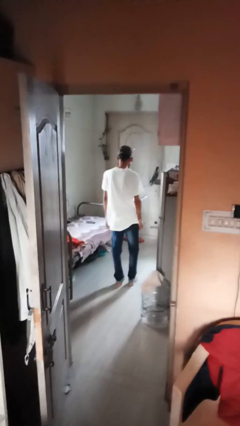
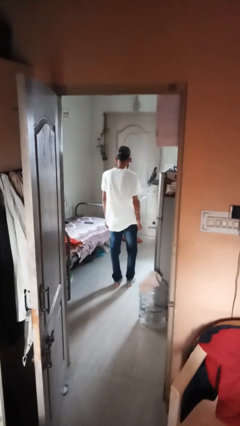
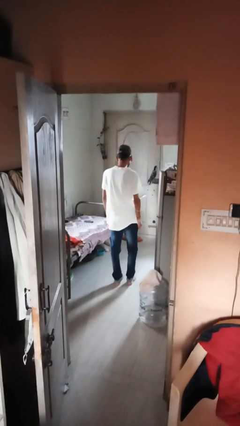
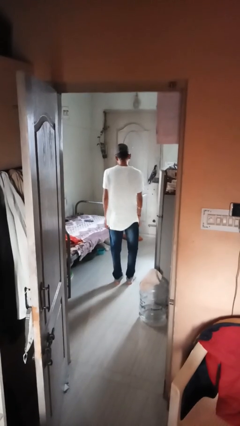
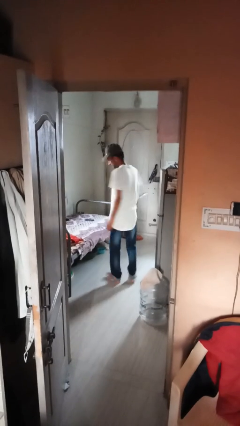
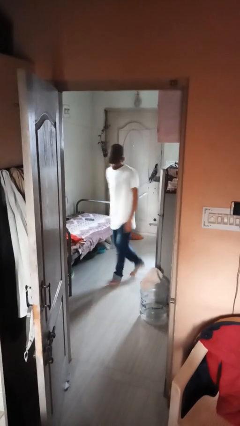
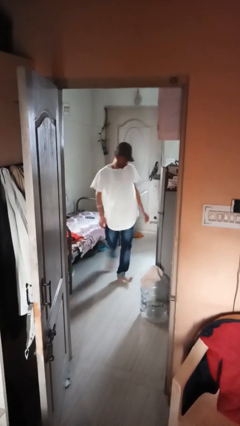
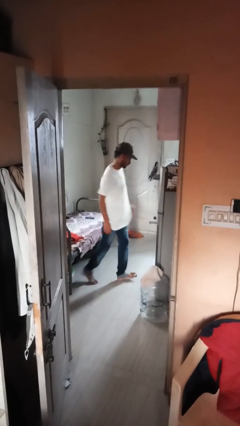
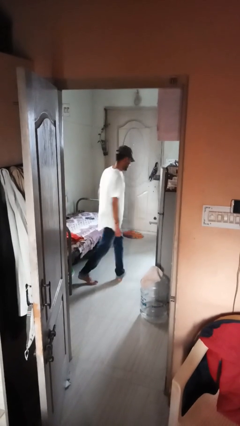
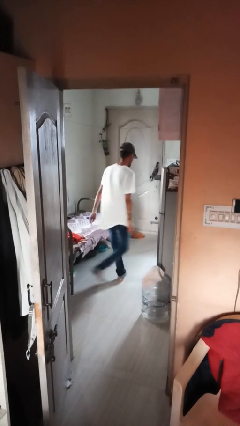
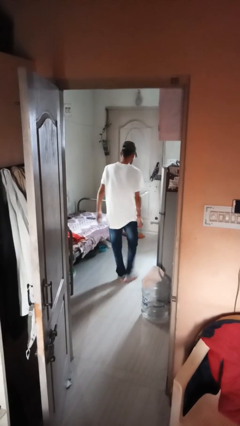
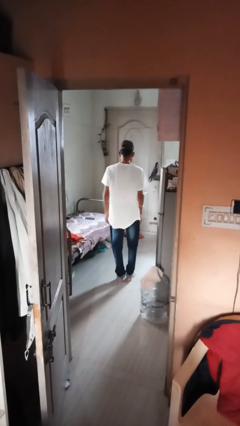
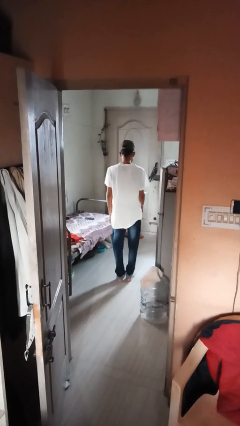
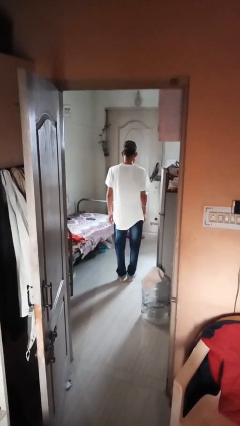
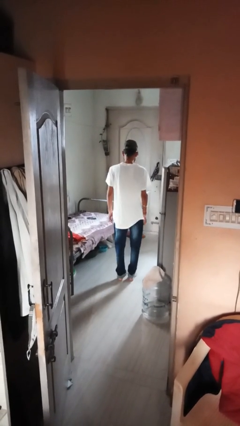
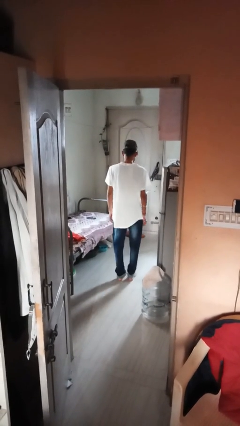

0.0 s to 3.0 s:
person twirls

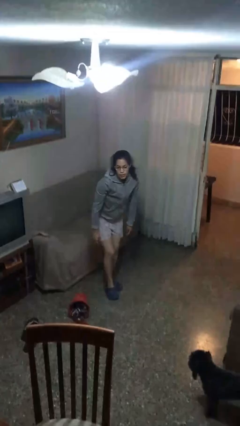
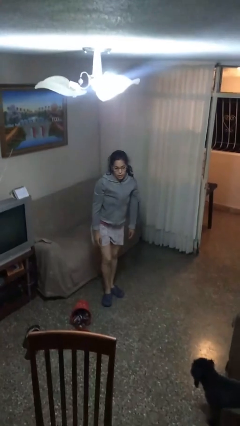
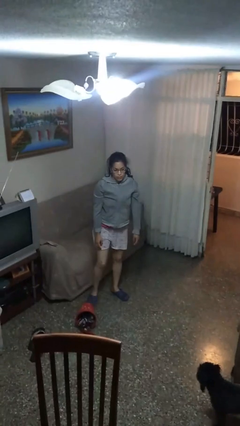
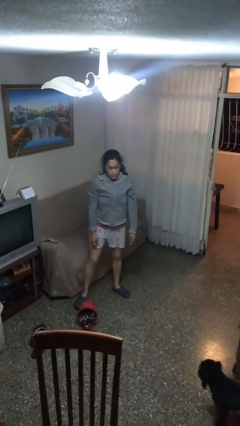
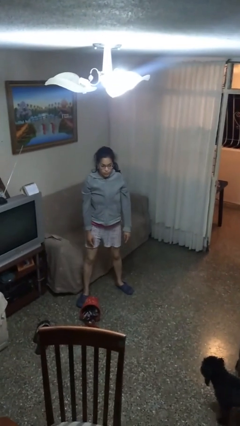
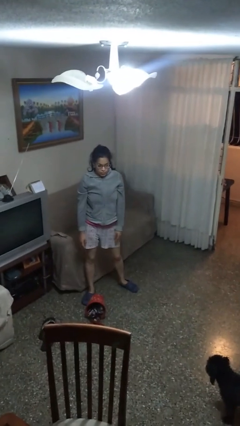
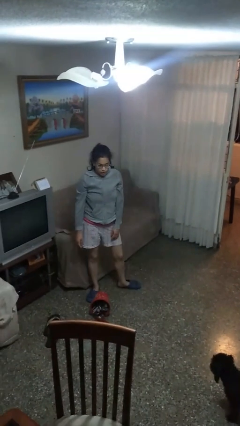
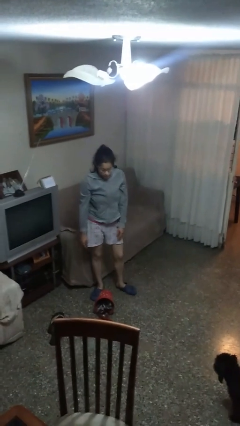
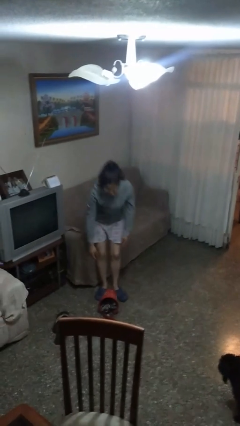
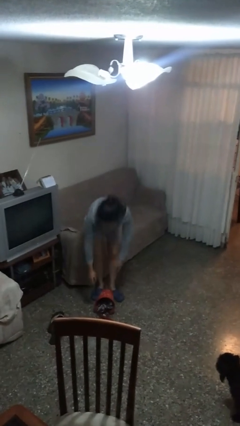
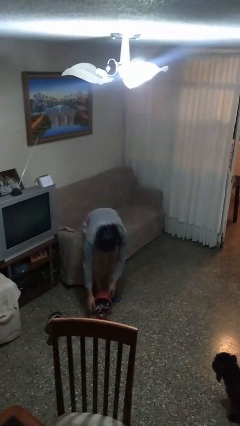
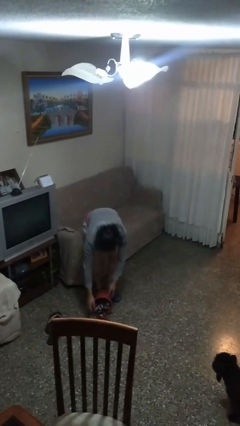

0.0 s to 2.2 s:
person stands up from floor

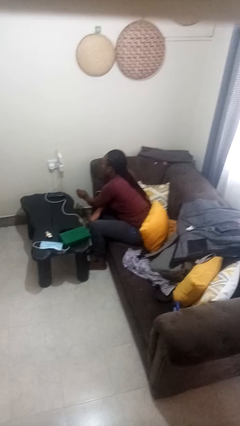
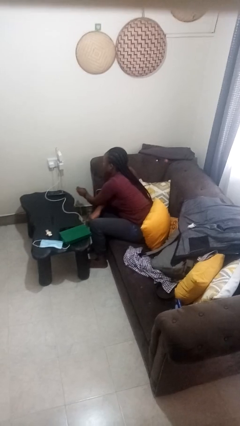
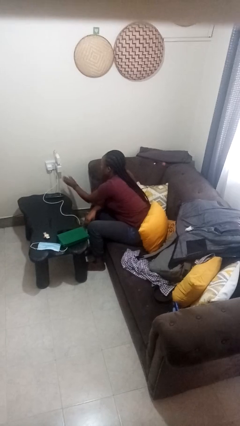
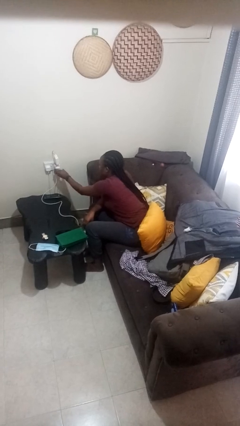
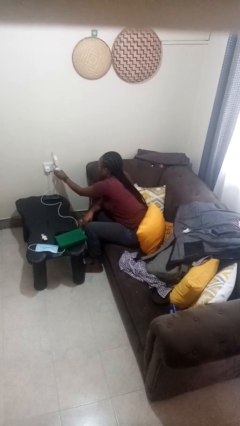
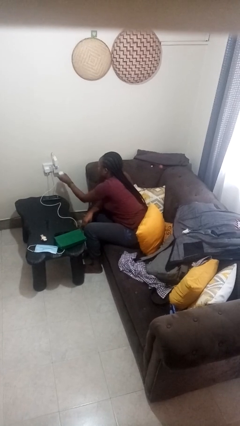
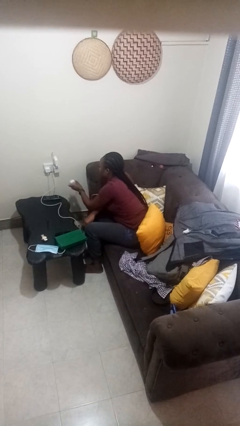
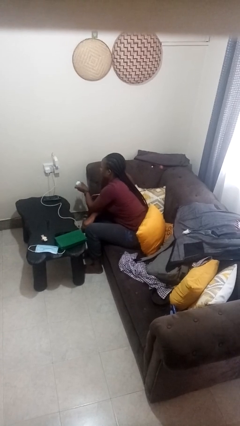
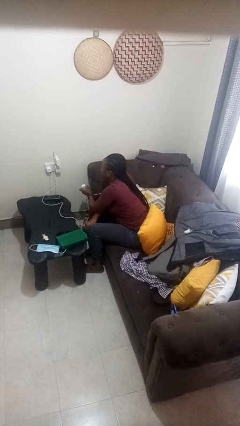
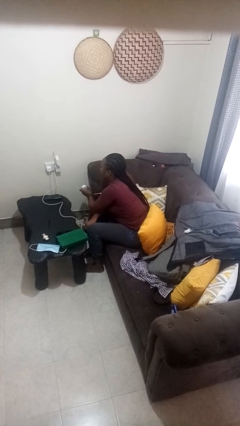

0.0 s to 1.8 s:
person unplugs from electrical socket

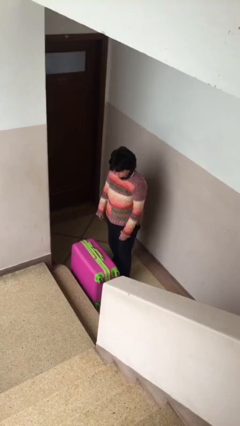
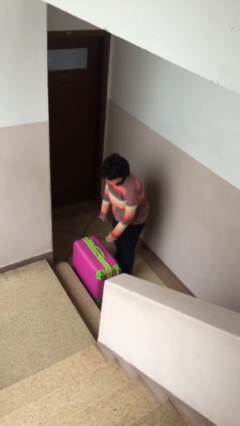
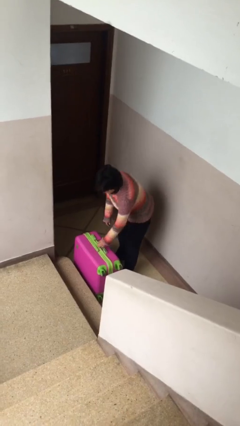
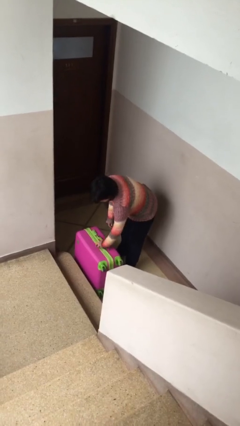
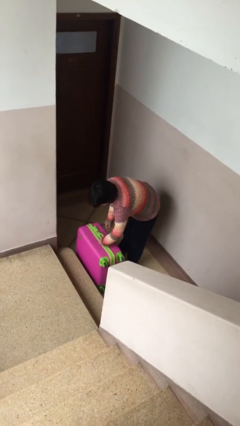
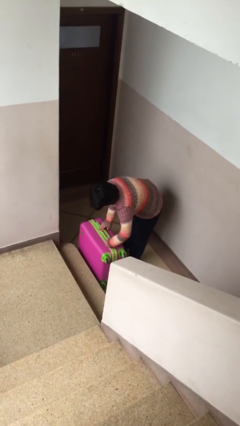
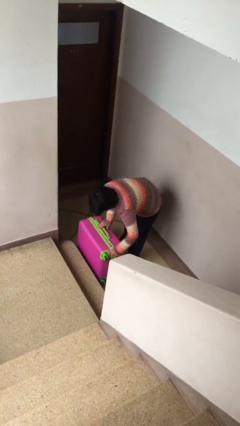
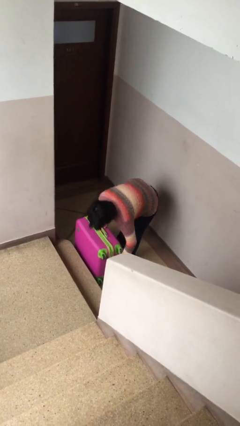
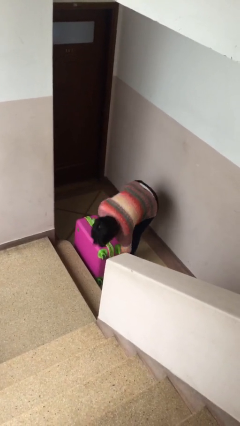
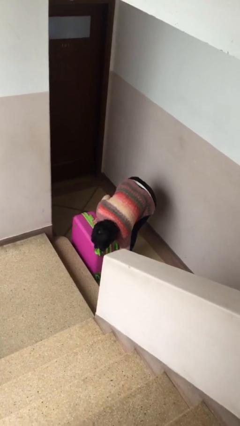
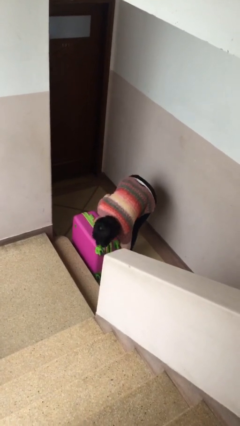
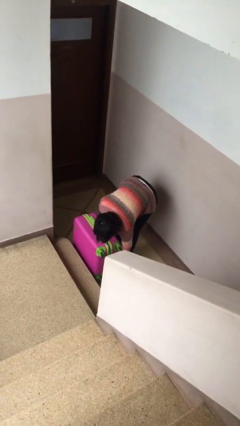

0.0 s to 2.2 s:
person opens suitcase

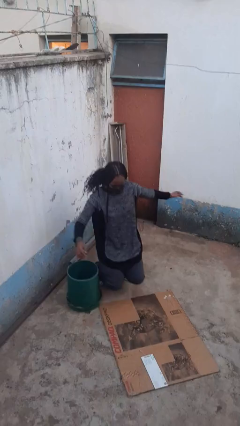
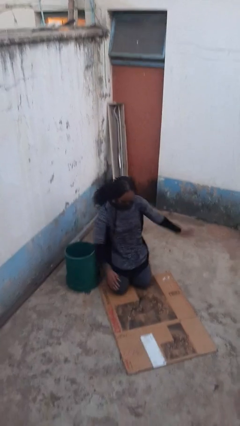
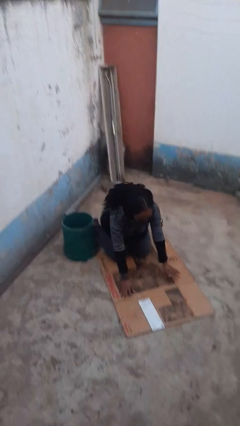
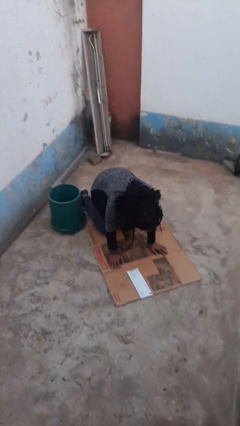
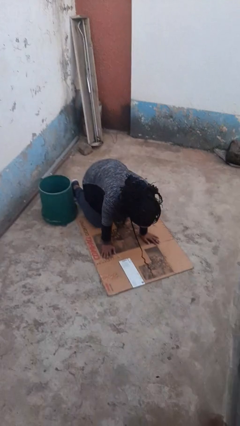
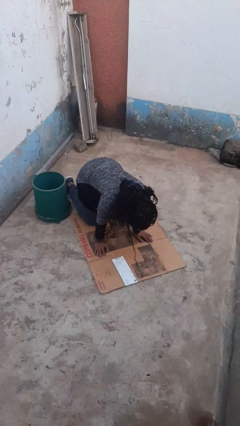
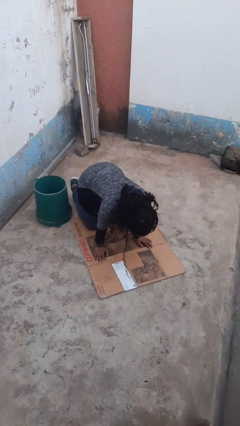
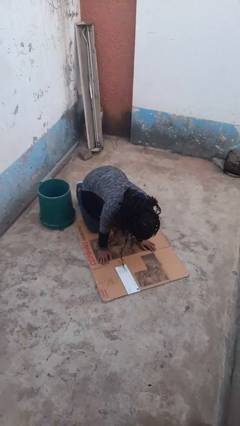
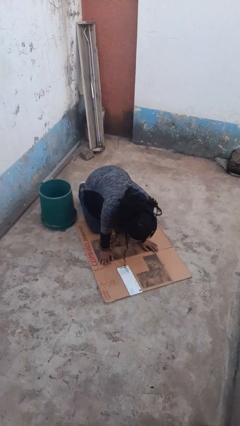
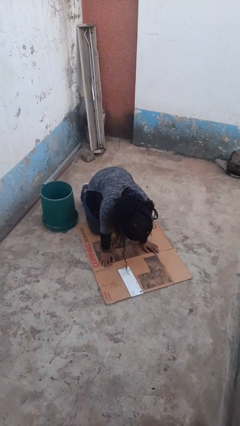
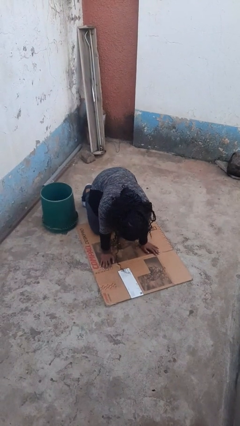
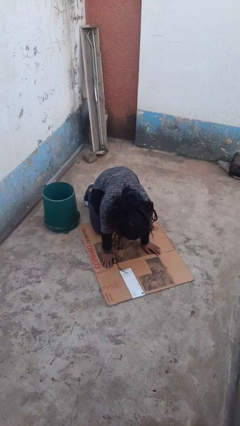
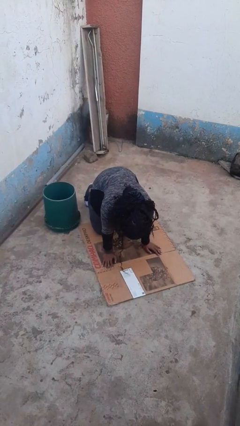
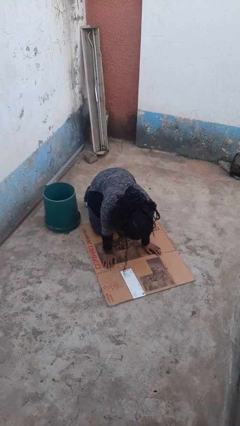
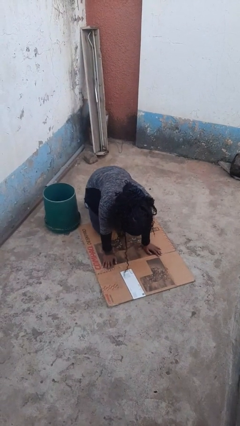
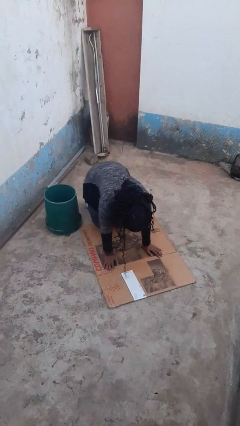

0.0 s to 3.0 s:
person trips on object on floor

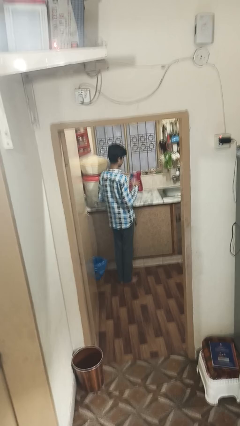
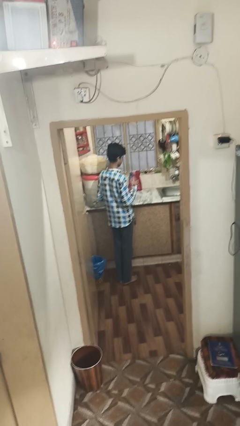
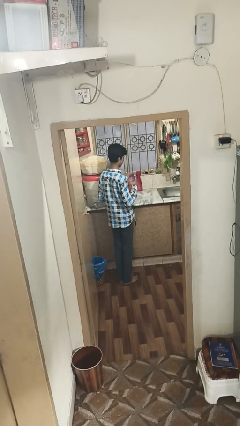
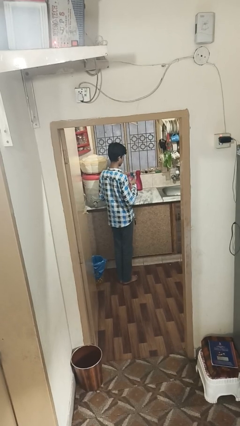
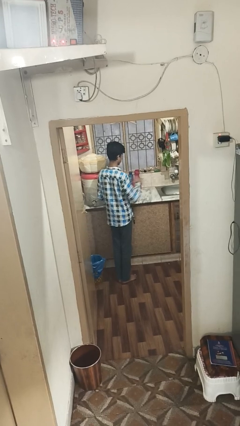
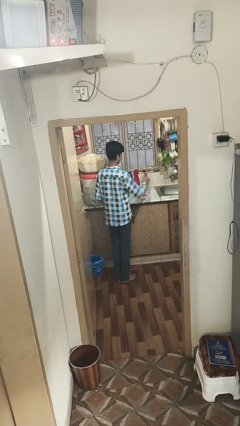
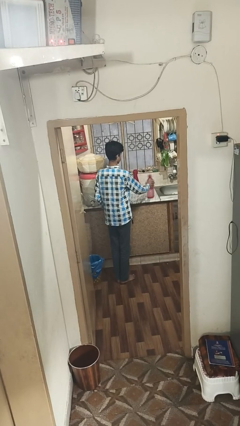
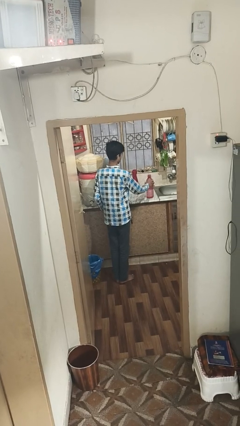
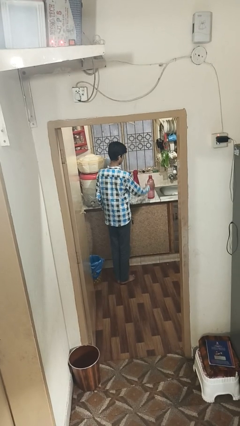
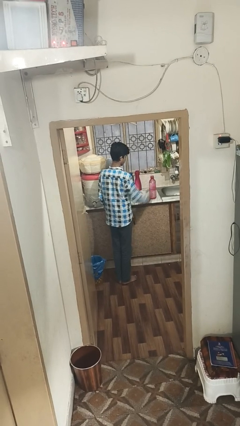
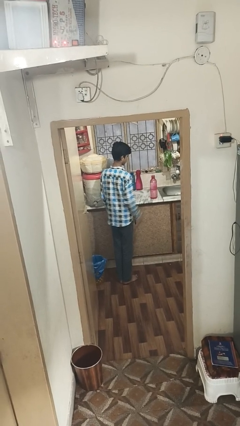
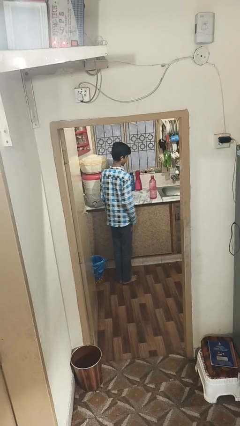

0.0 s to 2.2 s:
person puts down object on countertop

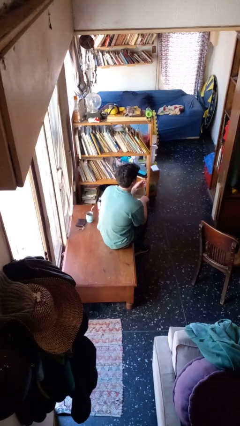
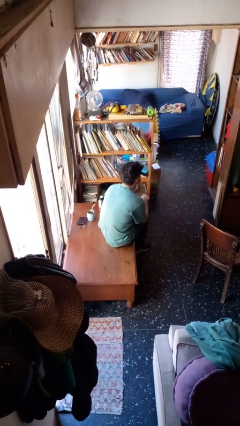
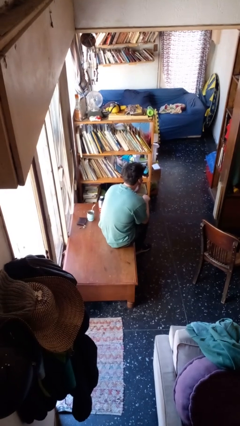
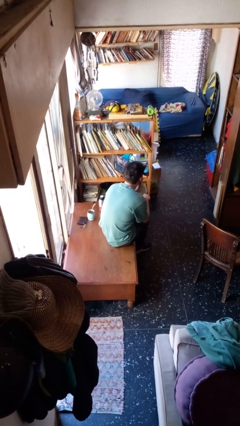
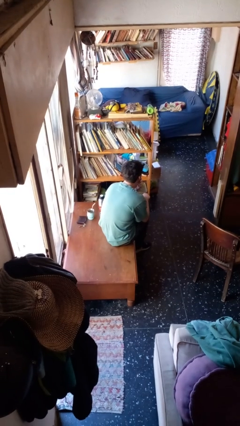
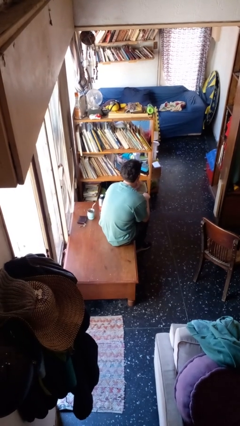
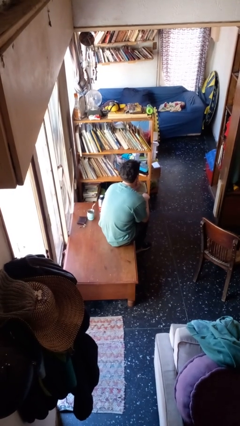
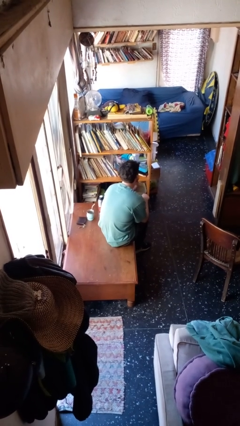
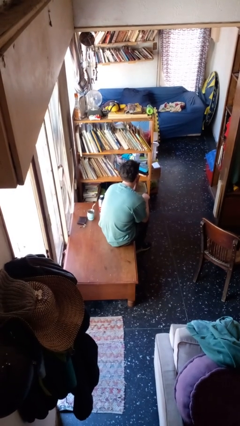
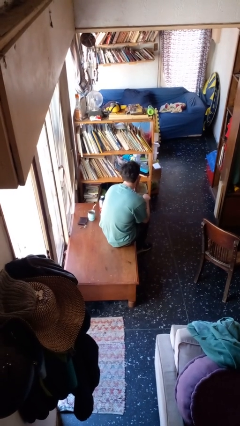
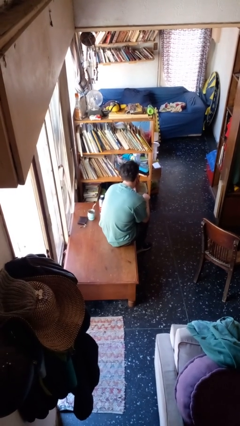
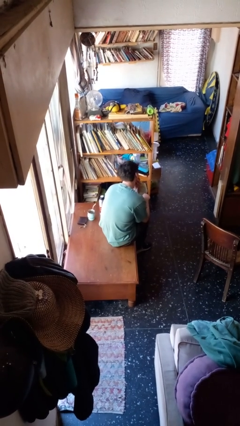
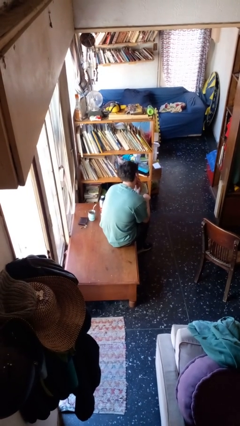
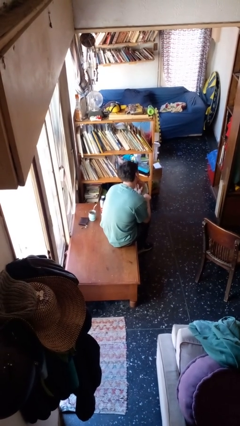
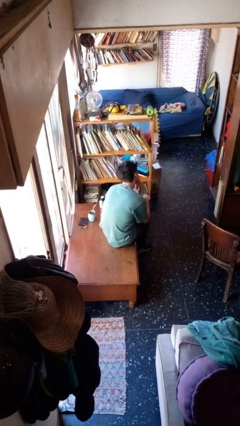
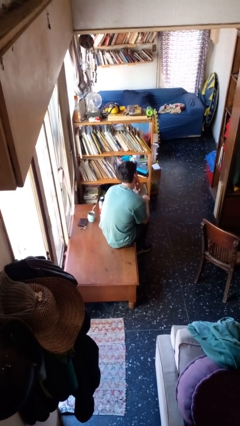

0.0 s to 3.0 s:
person strokes chin
